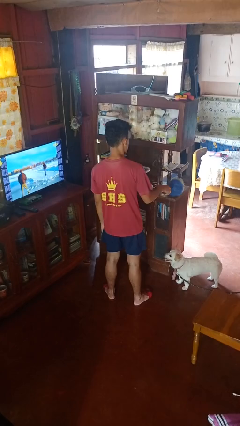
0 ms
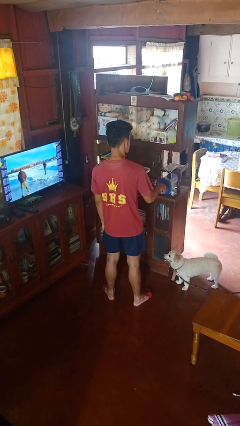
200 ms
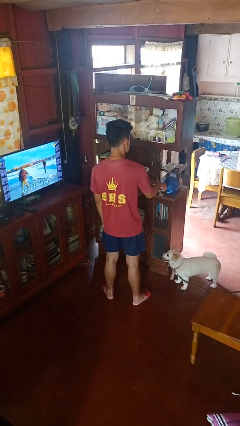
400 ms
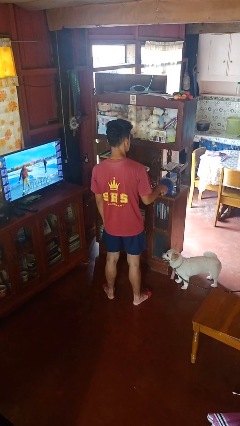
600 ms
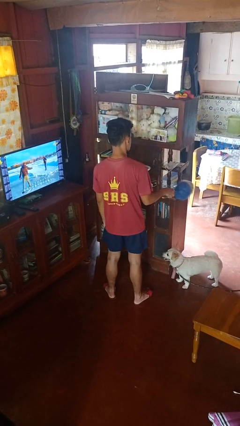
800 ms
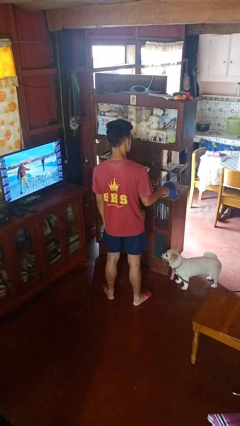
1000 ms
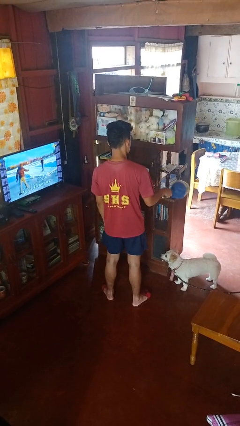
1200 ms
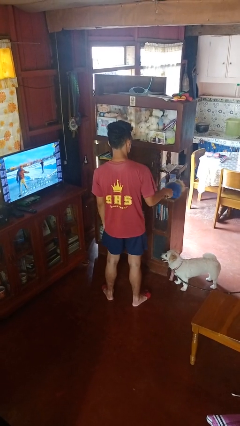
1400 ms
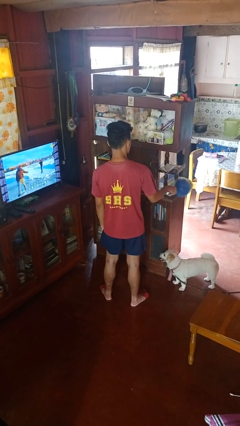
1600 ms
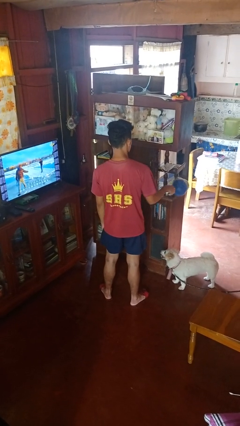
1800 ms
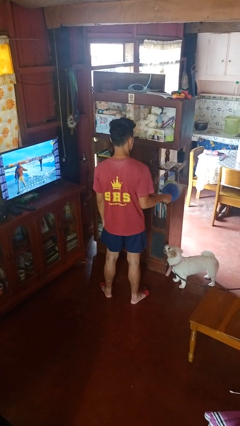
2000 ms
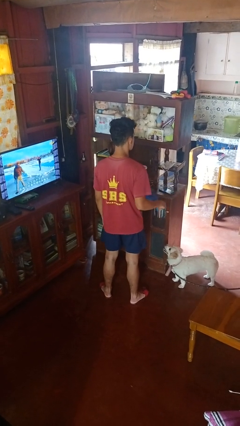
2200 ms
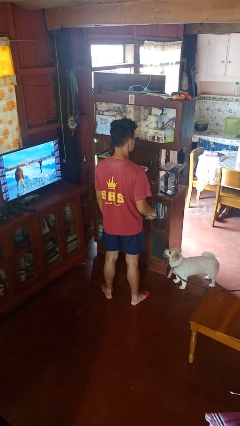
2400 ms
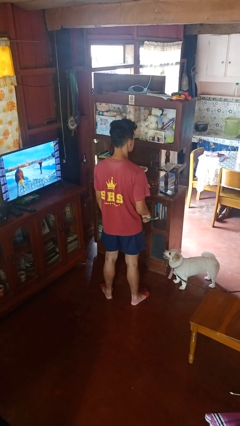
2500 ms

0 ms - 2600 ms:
person dusts furniture

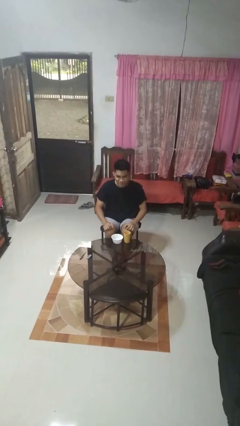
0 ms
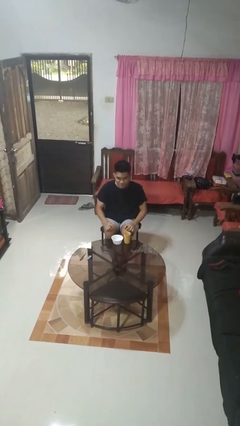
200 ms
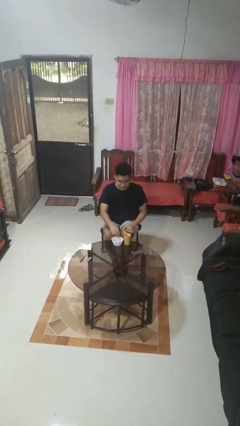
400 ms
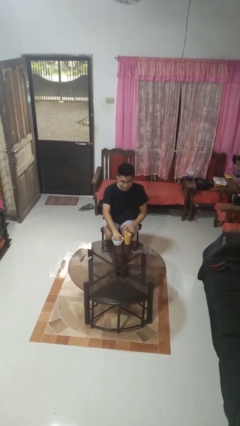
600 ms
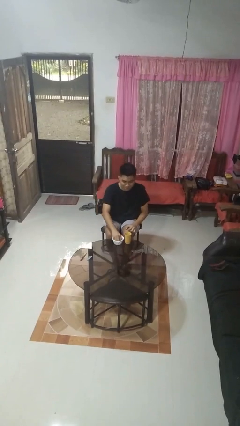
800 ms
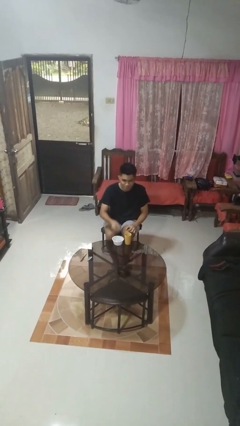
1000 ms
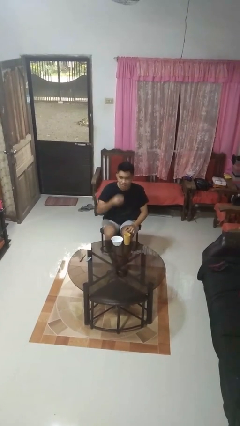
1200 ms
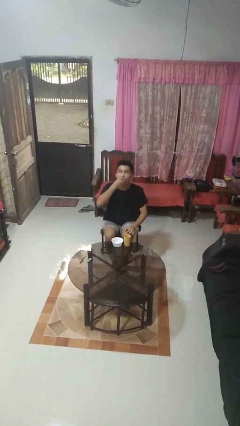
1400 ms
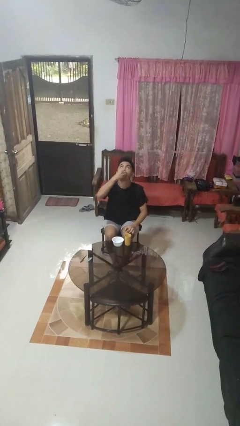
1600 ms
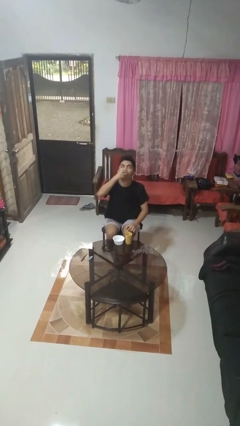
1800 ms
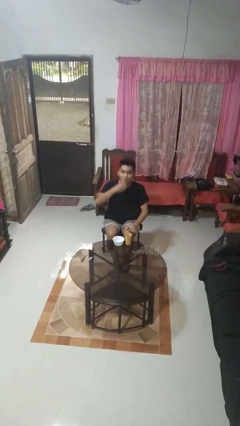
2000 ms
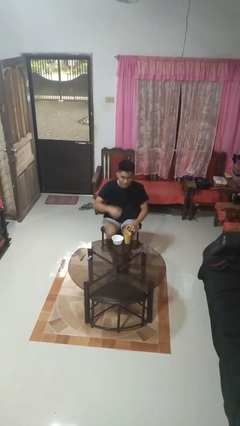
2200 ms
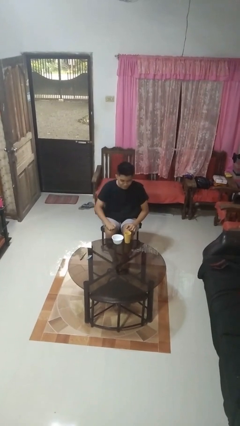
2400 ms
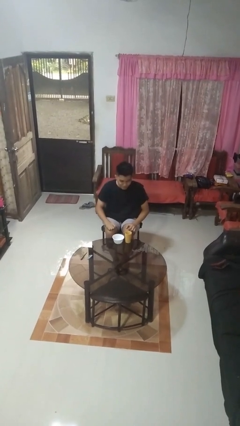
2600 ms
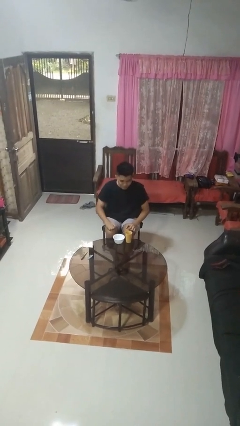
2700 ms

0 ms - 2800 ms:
person takes medicine pills

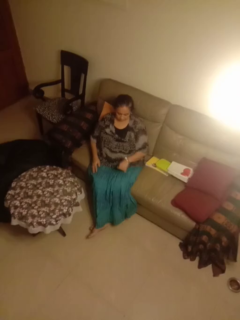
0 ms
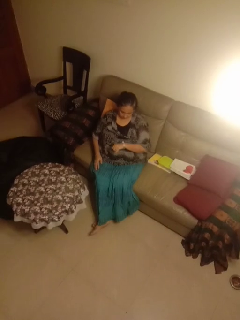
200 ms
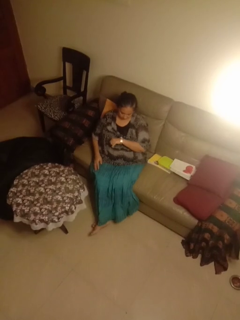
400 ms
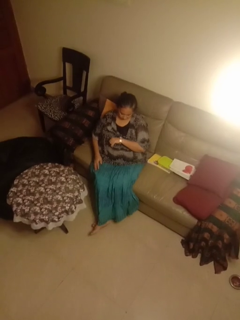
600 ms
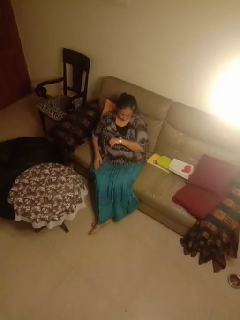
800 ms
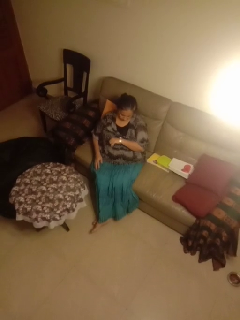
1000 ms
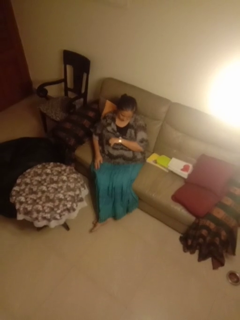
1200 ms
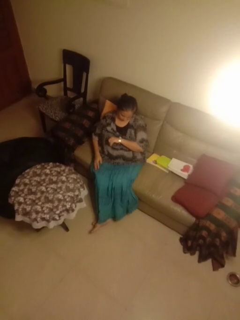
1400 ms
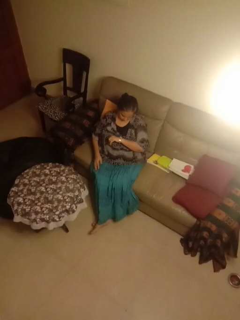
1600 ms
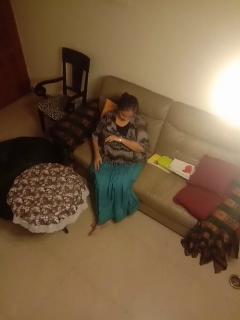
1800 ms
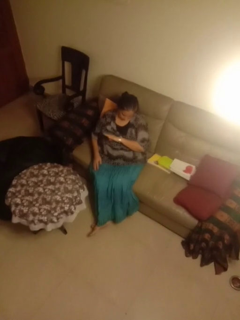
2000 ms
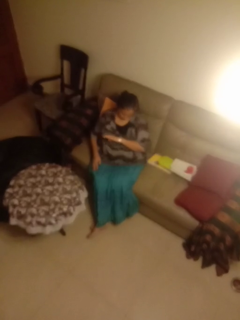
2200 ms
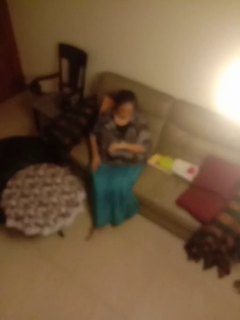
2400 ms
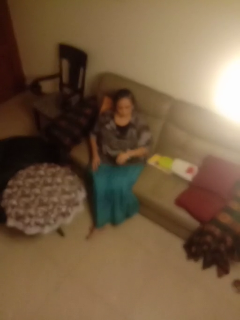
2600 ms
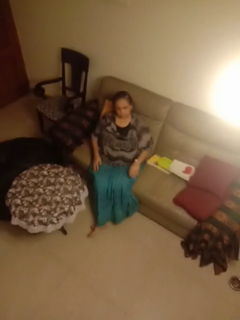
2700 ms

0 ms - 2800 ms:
person looks at wristwatch

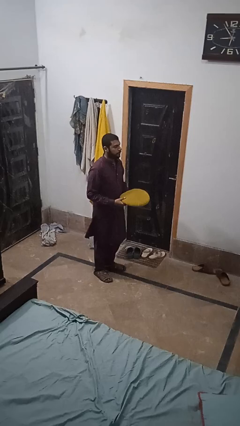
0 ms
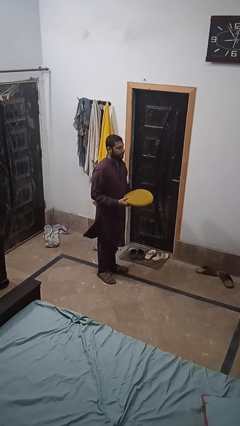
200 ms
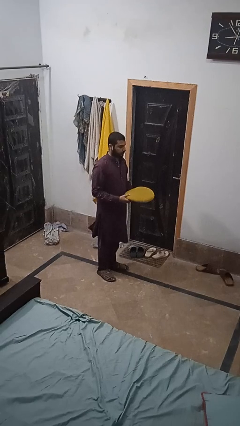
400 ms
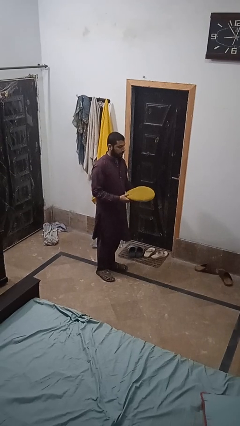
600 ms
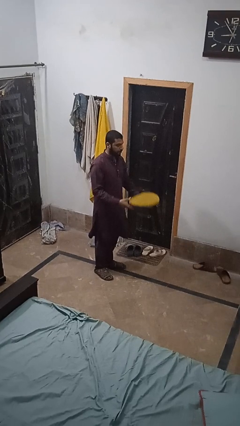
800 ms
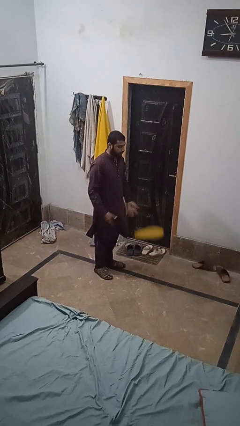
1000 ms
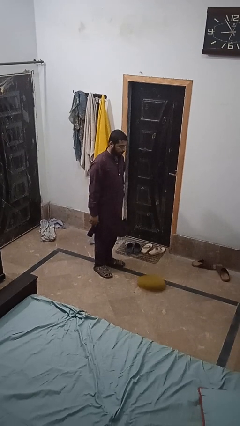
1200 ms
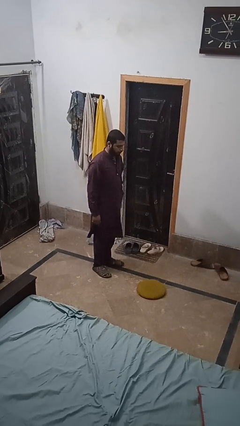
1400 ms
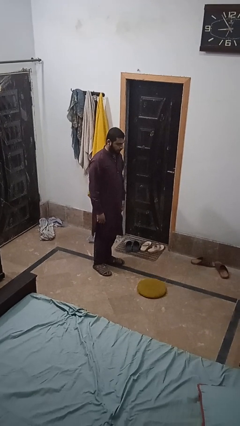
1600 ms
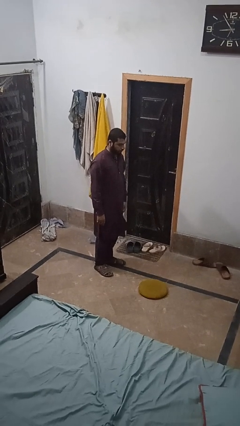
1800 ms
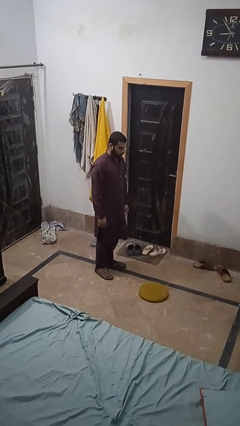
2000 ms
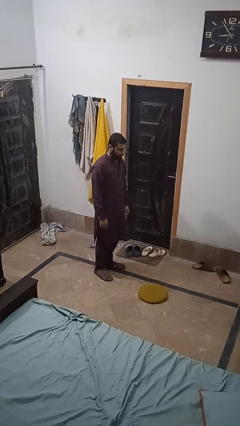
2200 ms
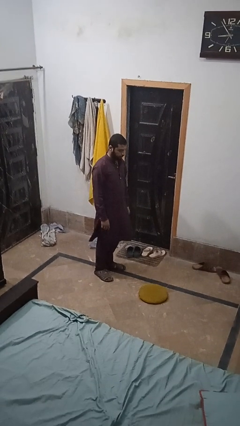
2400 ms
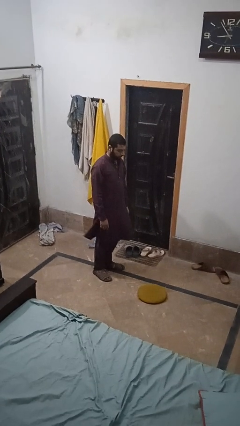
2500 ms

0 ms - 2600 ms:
person throws object to ground

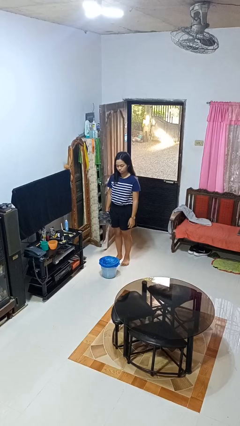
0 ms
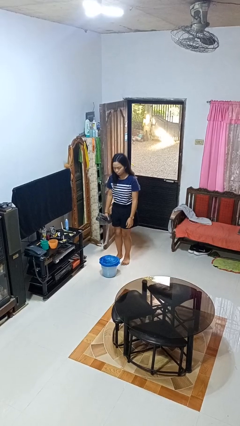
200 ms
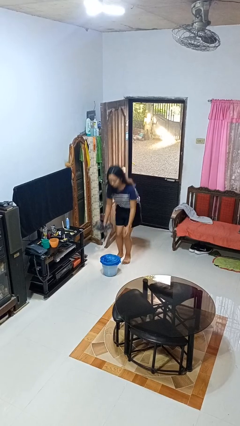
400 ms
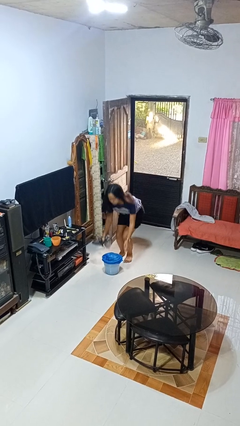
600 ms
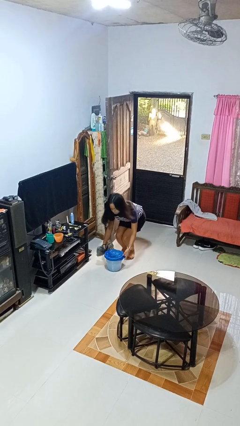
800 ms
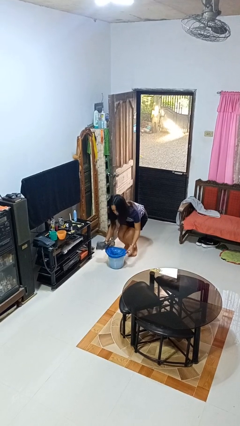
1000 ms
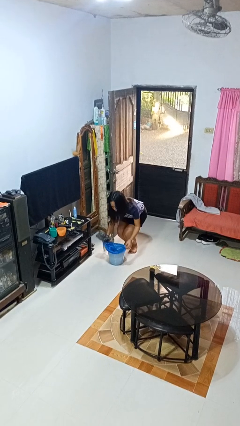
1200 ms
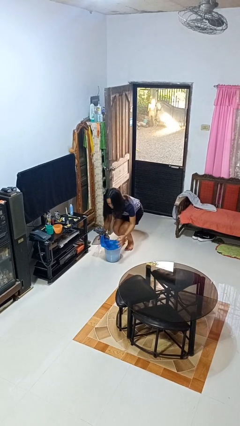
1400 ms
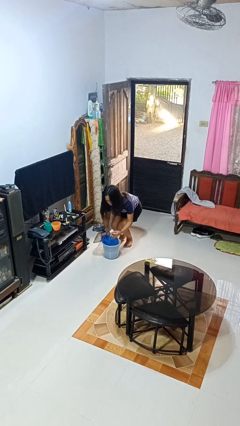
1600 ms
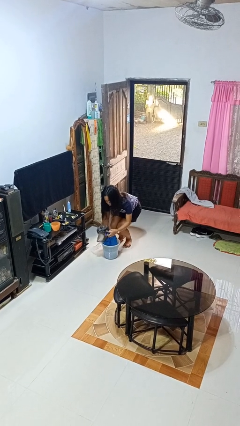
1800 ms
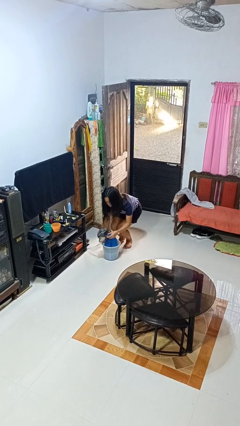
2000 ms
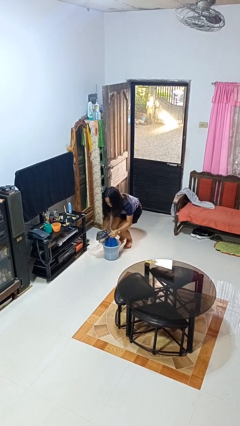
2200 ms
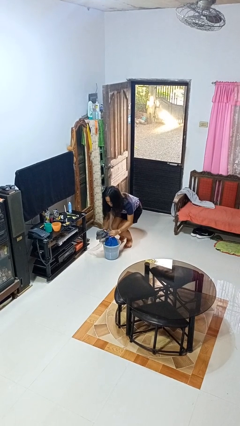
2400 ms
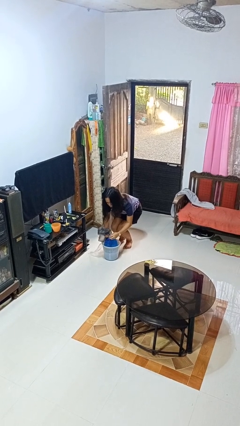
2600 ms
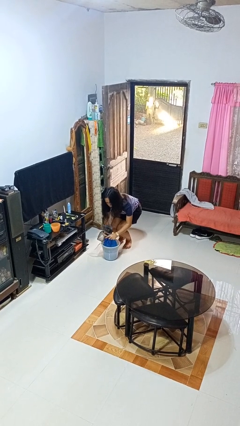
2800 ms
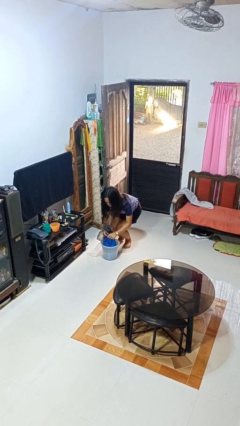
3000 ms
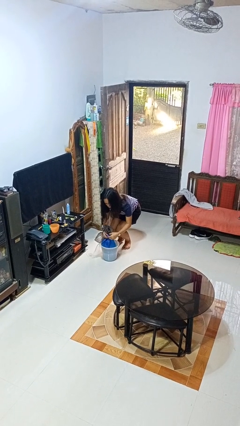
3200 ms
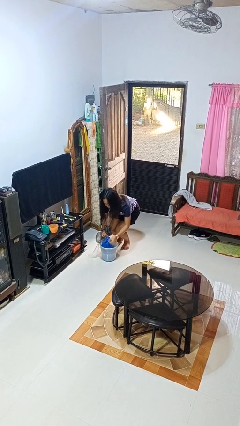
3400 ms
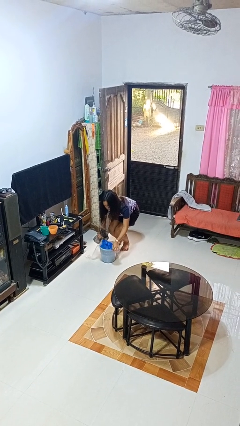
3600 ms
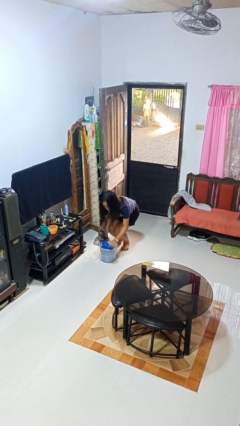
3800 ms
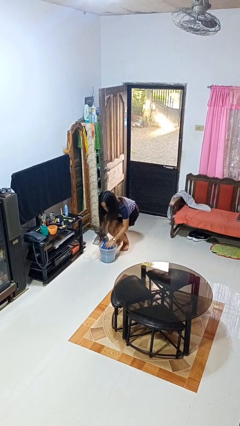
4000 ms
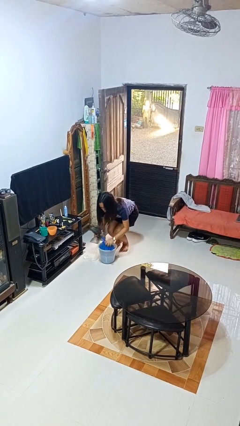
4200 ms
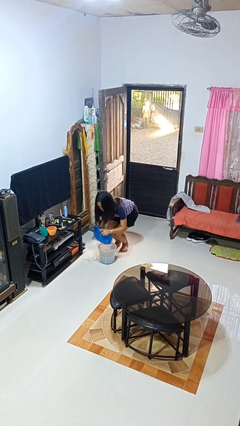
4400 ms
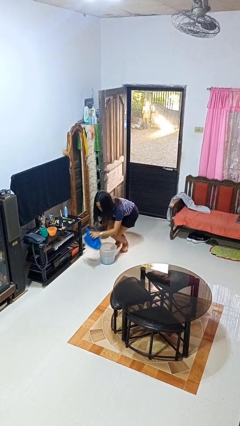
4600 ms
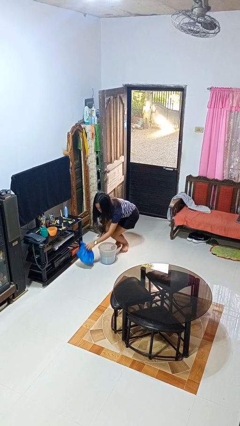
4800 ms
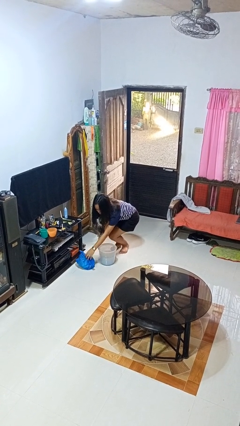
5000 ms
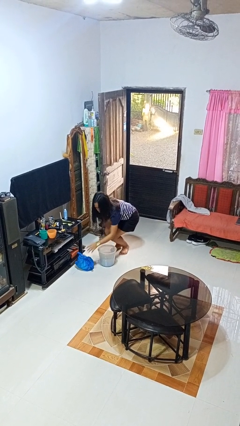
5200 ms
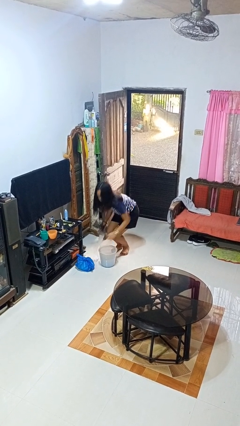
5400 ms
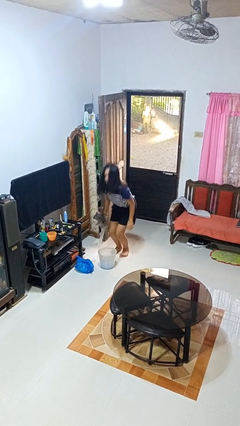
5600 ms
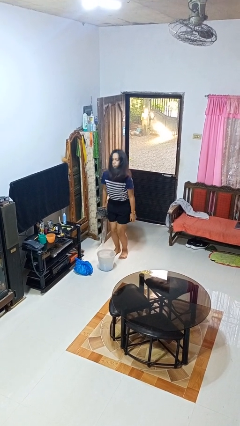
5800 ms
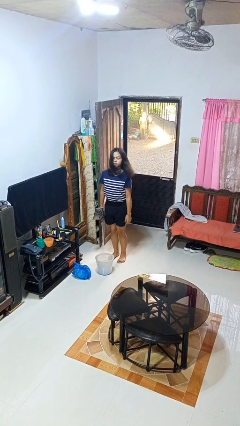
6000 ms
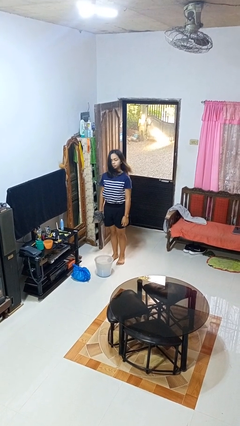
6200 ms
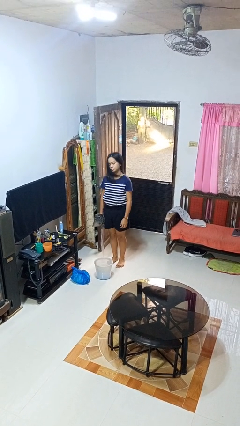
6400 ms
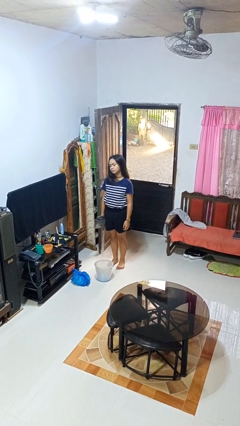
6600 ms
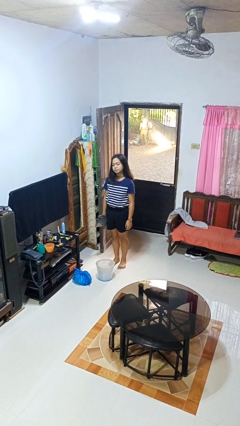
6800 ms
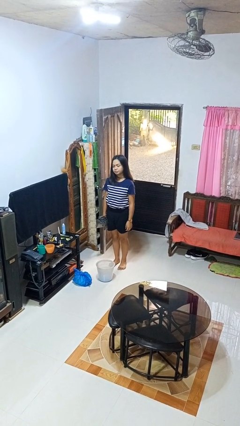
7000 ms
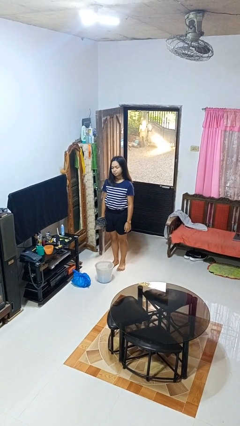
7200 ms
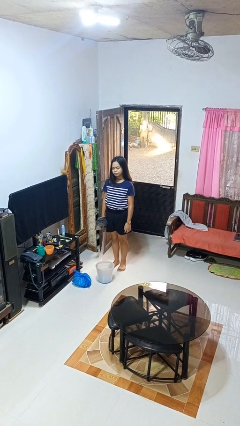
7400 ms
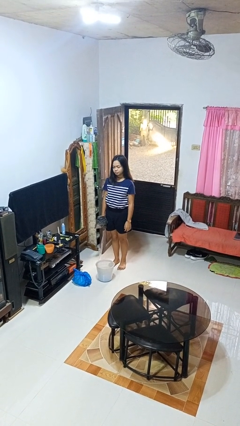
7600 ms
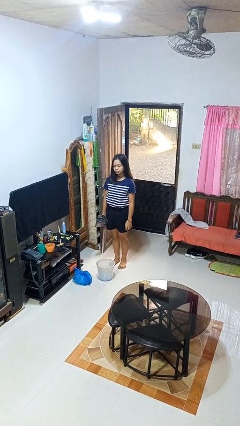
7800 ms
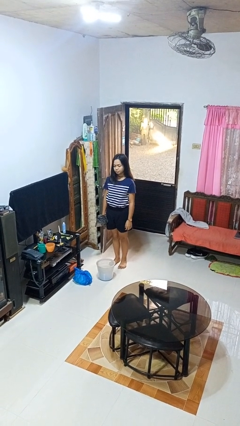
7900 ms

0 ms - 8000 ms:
person removes trashbag from trashcan
